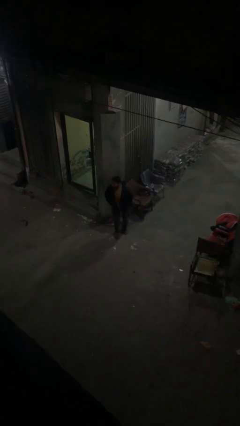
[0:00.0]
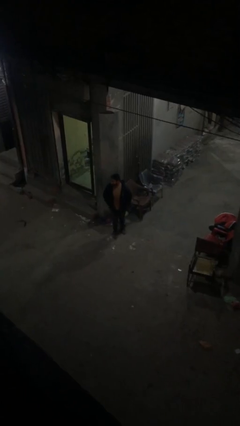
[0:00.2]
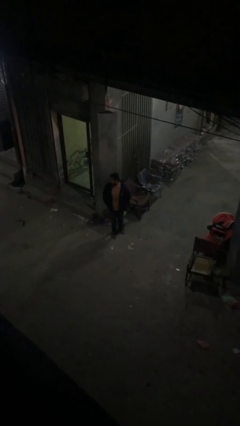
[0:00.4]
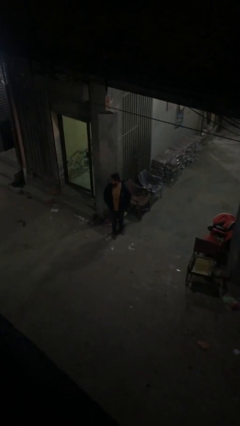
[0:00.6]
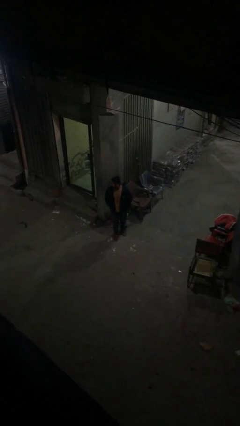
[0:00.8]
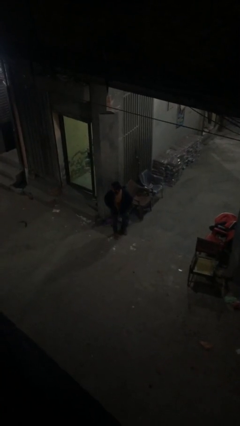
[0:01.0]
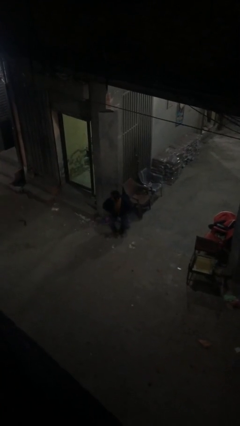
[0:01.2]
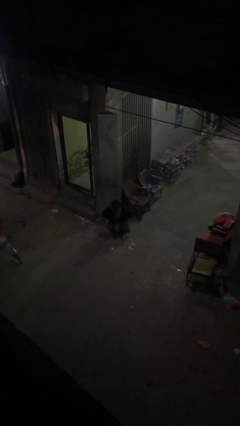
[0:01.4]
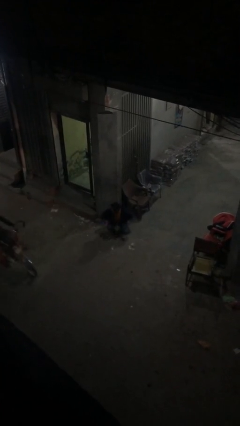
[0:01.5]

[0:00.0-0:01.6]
person sits down

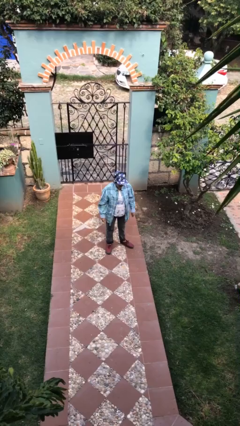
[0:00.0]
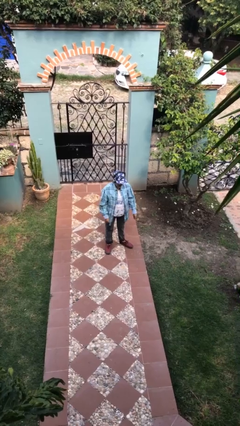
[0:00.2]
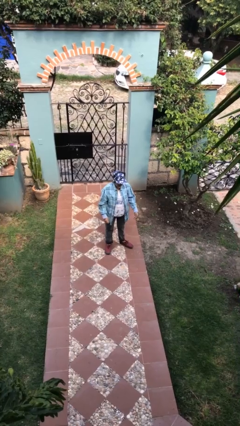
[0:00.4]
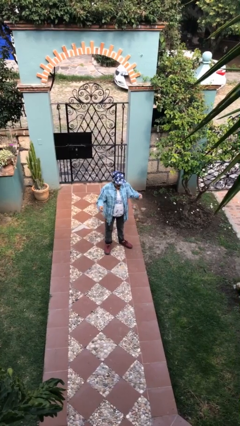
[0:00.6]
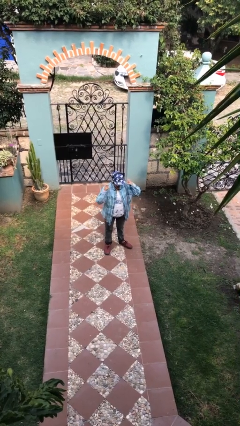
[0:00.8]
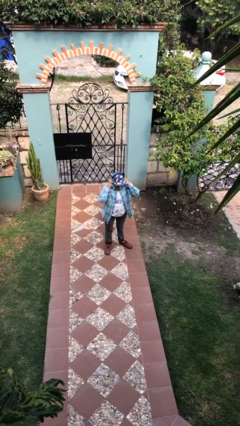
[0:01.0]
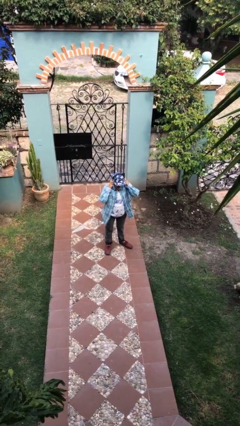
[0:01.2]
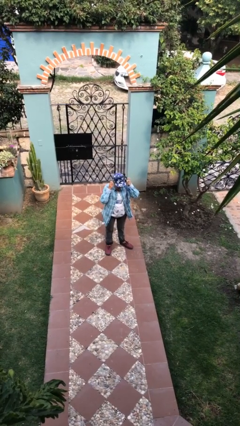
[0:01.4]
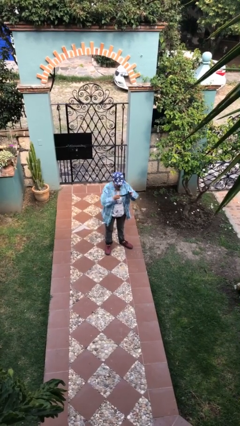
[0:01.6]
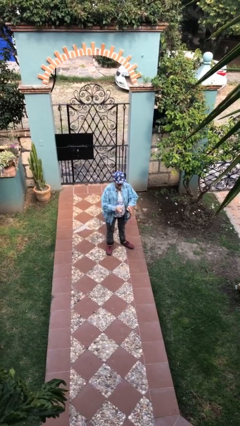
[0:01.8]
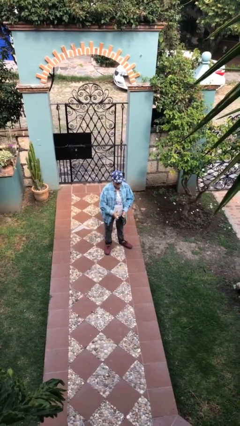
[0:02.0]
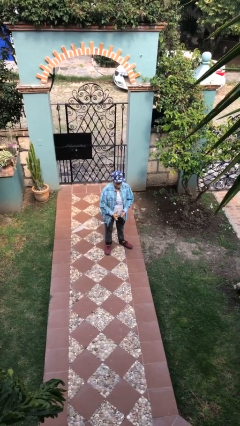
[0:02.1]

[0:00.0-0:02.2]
person takes off headphones

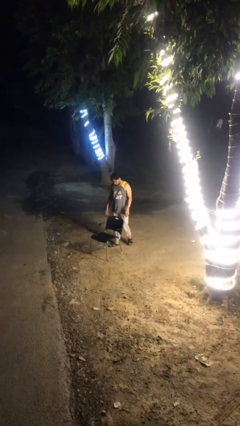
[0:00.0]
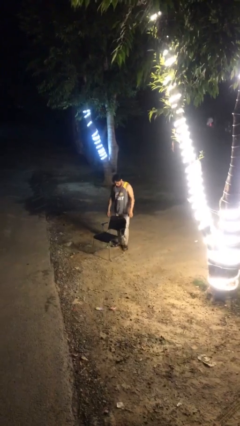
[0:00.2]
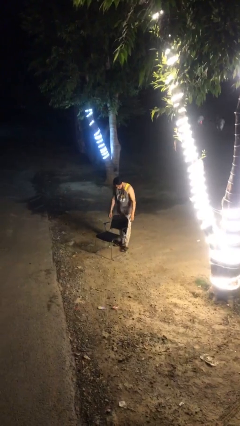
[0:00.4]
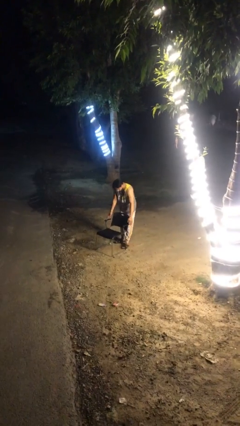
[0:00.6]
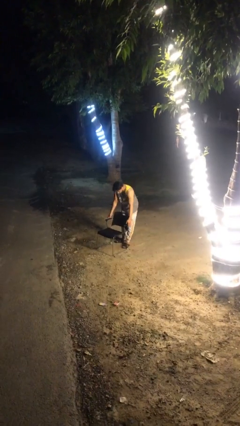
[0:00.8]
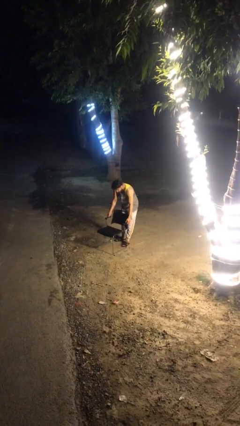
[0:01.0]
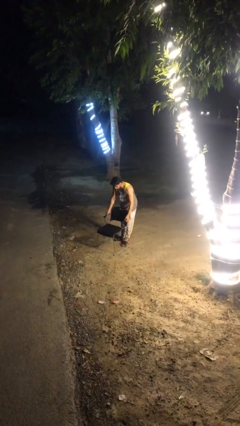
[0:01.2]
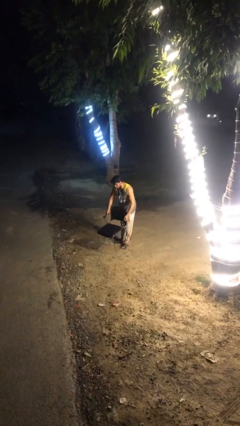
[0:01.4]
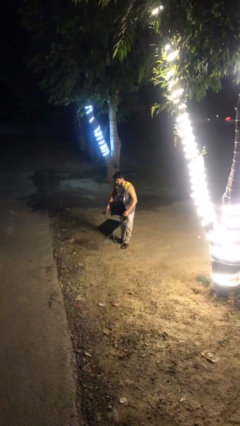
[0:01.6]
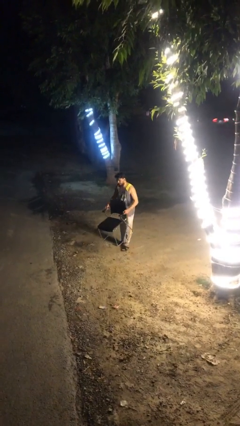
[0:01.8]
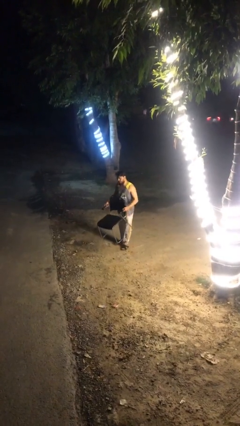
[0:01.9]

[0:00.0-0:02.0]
person picks up object from floor

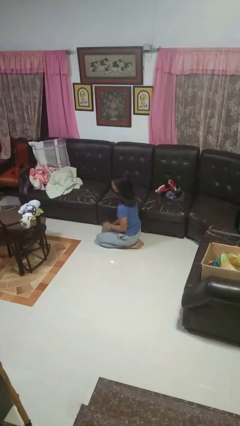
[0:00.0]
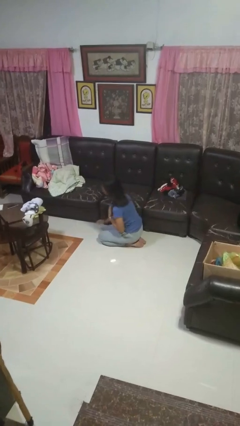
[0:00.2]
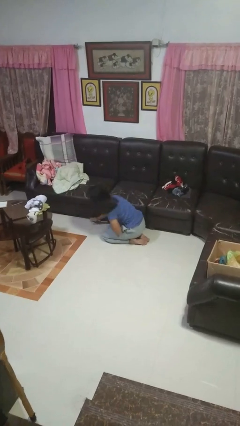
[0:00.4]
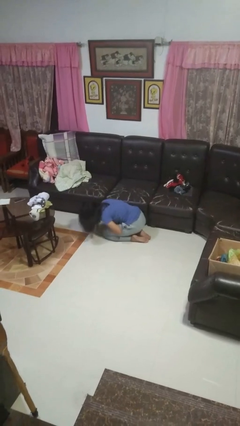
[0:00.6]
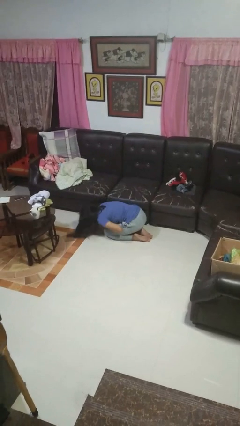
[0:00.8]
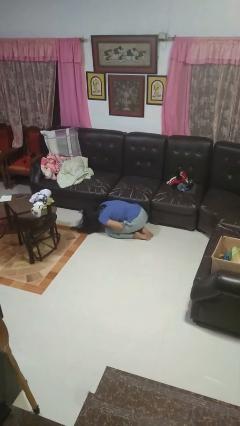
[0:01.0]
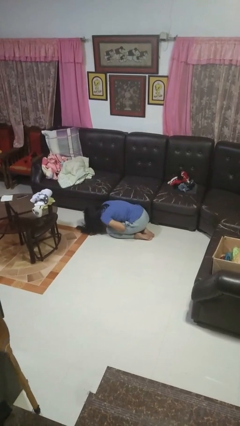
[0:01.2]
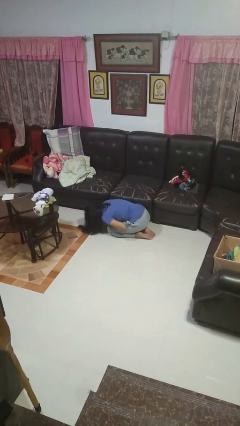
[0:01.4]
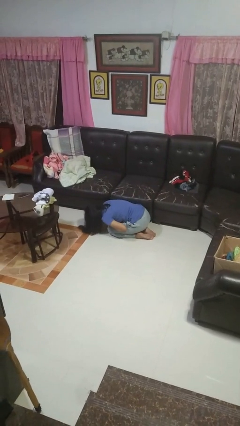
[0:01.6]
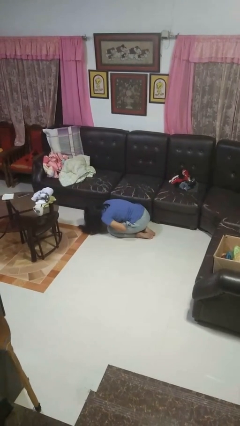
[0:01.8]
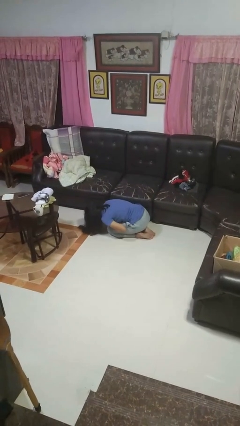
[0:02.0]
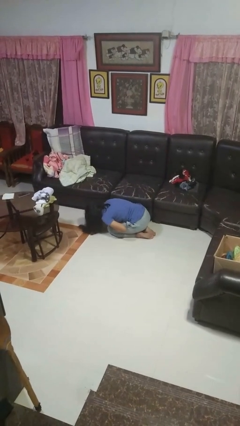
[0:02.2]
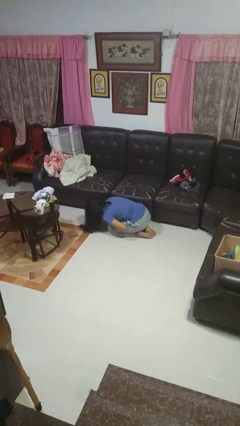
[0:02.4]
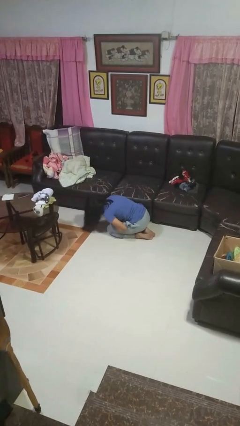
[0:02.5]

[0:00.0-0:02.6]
person searches under couch

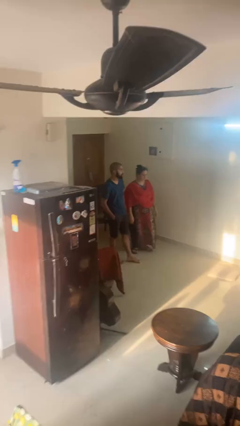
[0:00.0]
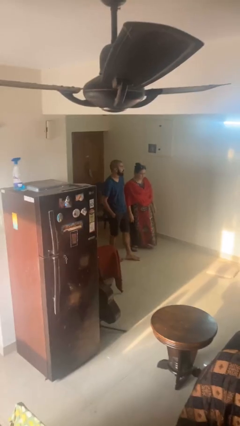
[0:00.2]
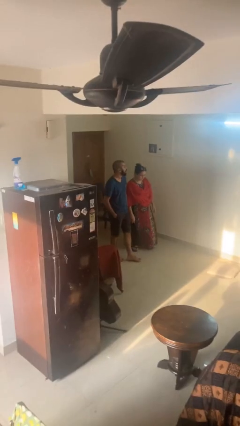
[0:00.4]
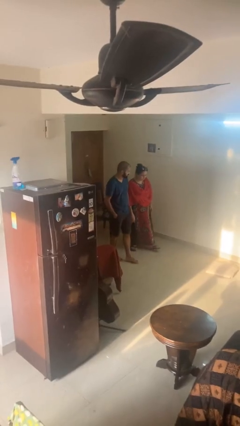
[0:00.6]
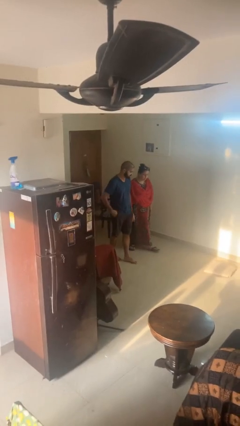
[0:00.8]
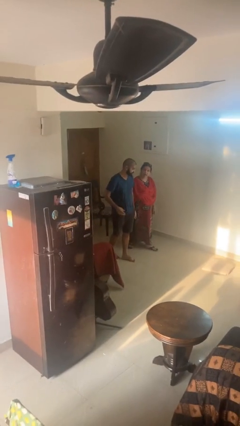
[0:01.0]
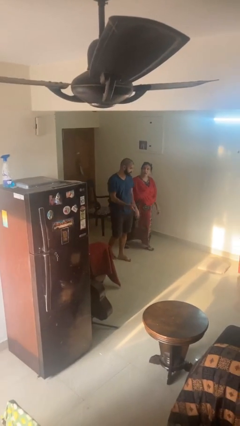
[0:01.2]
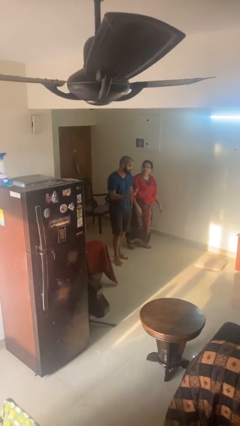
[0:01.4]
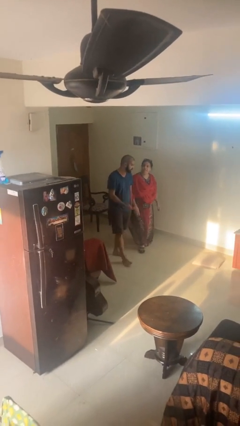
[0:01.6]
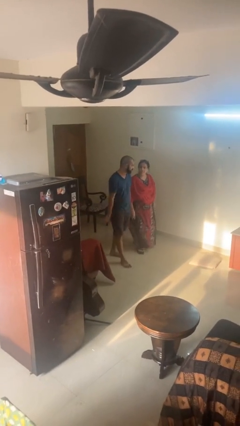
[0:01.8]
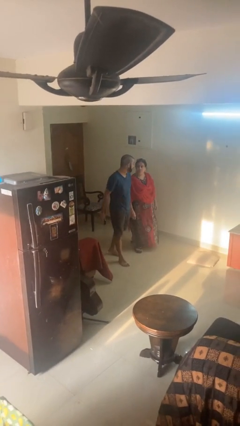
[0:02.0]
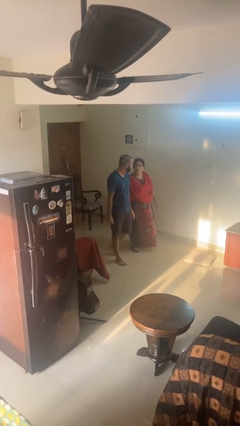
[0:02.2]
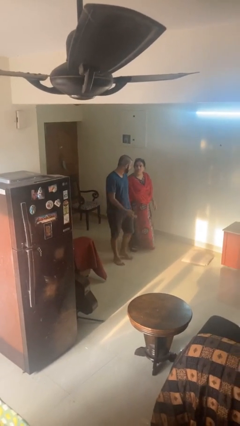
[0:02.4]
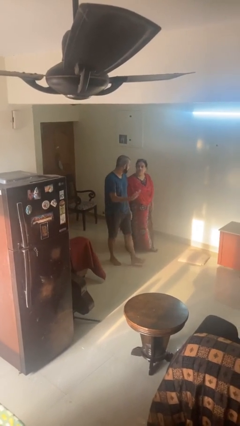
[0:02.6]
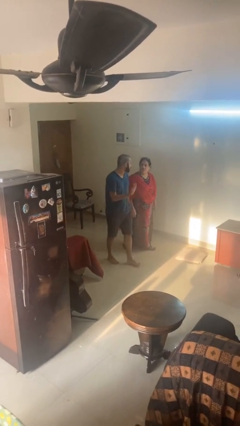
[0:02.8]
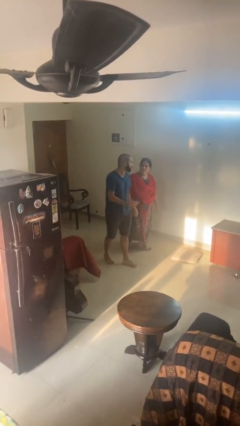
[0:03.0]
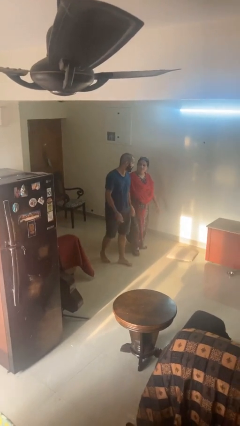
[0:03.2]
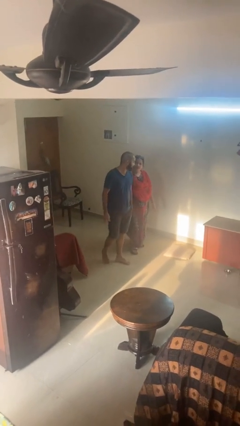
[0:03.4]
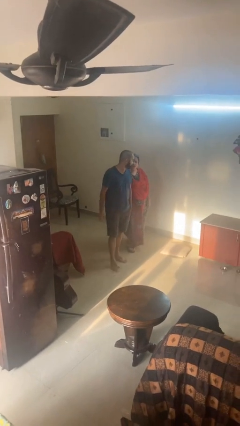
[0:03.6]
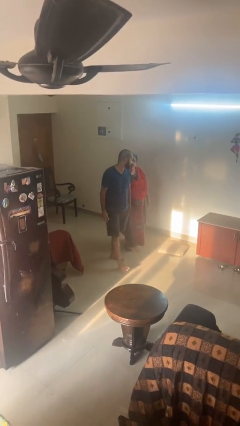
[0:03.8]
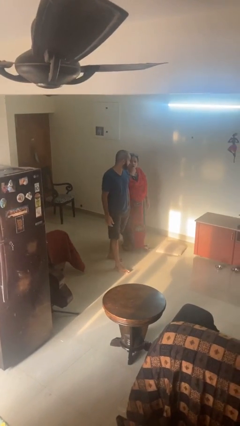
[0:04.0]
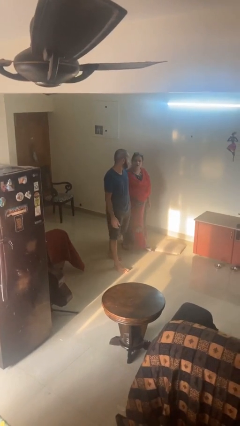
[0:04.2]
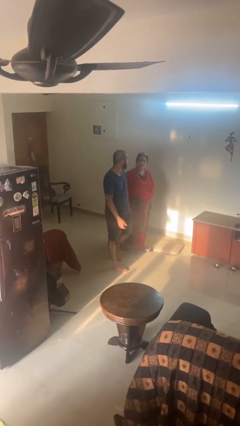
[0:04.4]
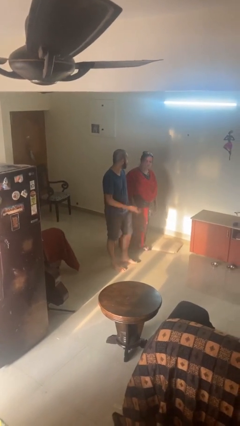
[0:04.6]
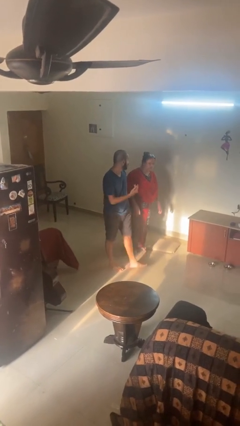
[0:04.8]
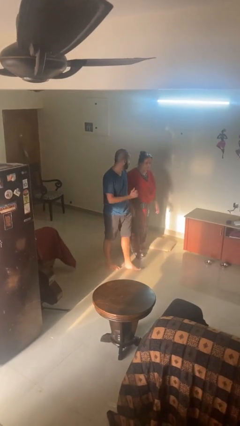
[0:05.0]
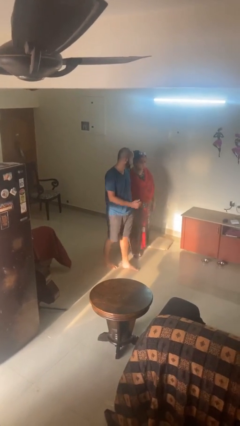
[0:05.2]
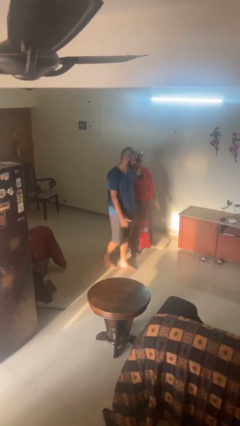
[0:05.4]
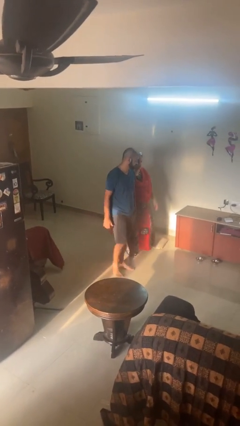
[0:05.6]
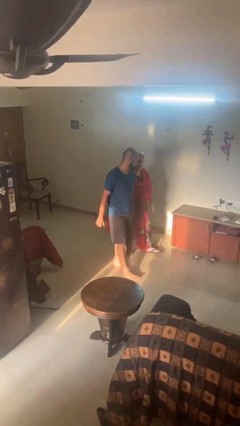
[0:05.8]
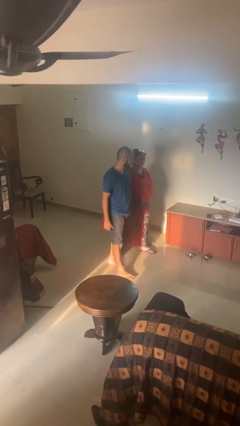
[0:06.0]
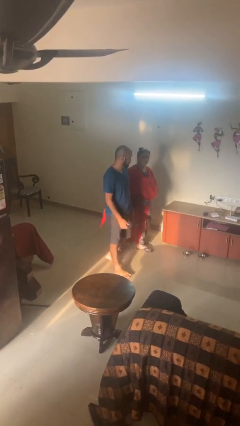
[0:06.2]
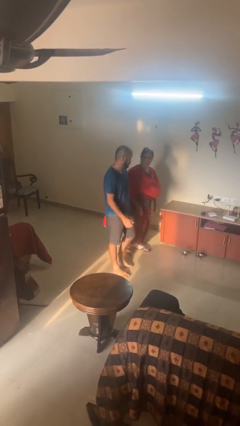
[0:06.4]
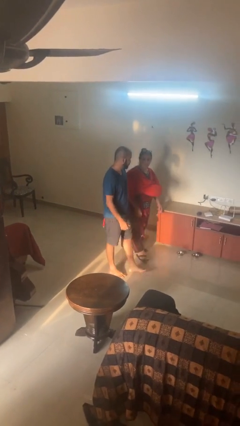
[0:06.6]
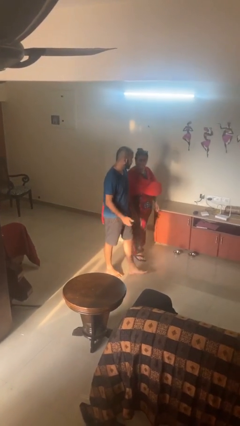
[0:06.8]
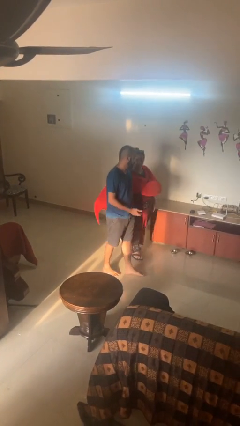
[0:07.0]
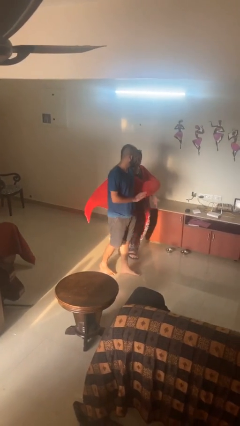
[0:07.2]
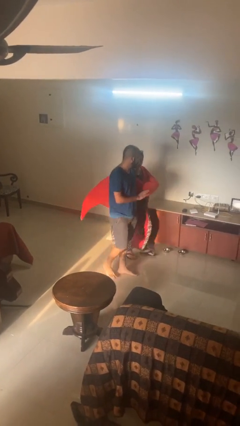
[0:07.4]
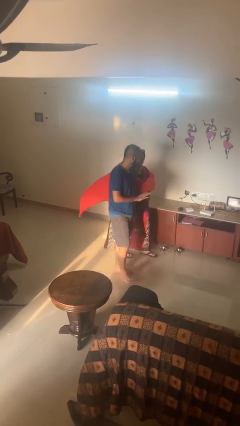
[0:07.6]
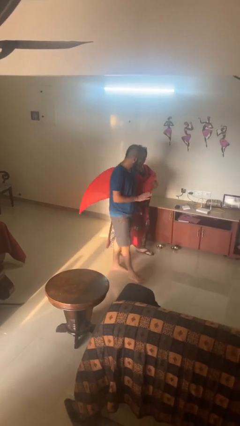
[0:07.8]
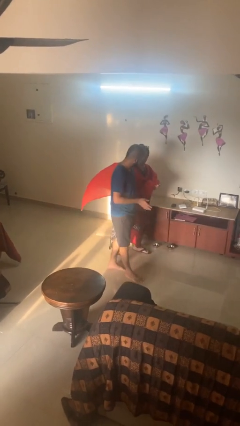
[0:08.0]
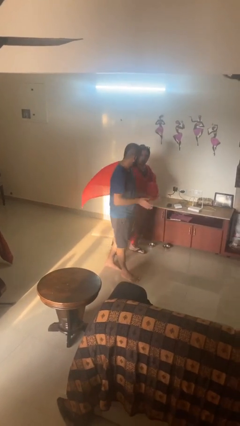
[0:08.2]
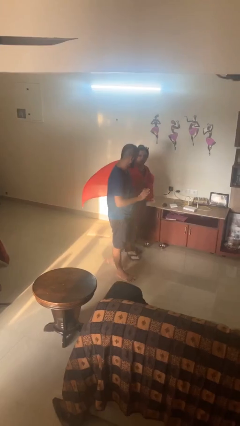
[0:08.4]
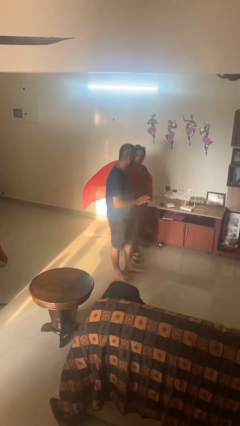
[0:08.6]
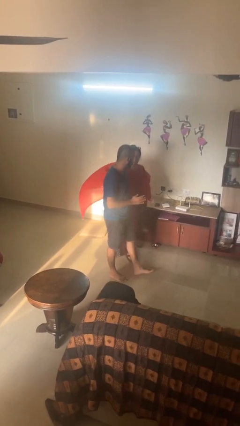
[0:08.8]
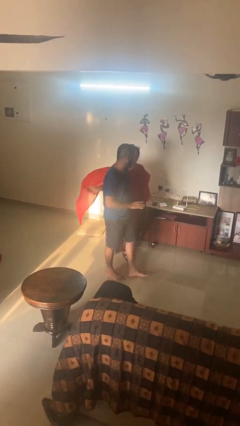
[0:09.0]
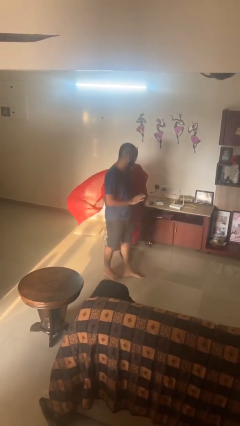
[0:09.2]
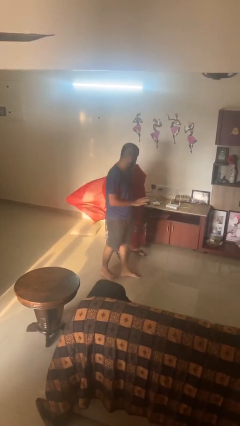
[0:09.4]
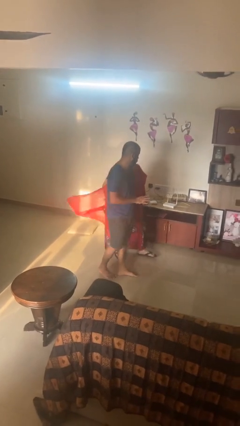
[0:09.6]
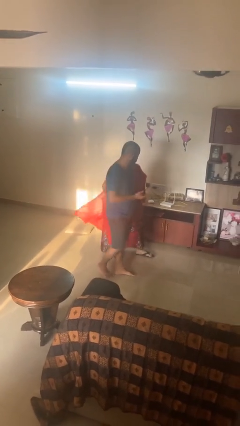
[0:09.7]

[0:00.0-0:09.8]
person talks to person
